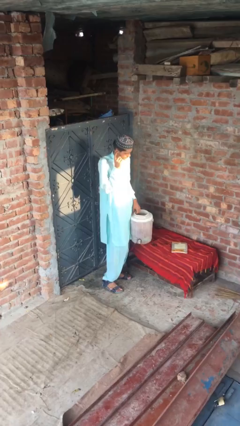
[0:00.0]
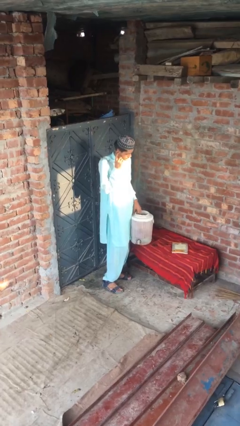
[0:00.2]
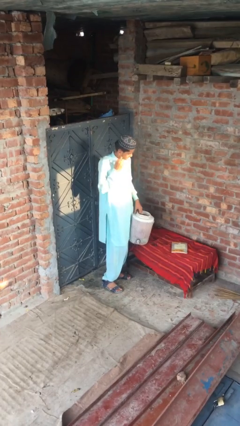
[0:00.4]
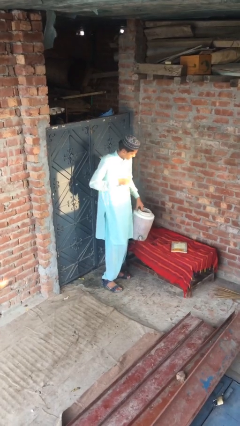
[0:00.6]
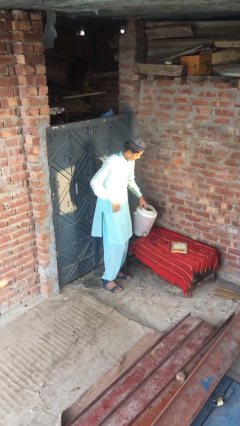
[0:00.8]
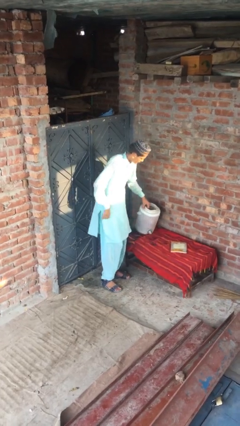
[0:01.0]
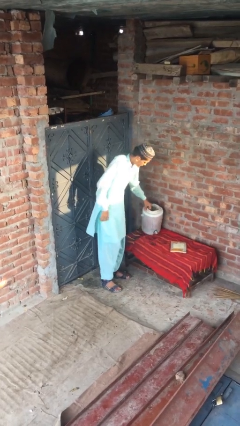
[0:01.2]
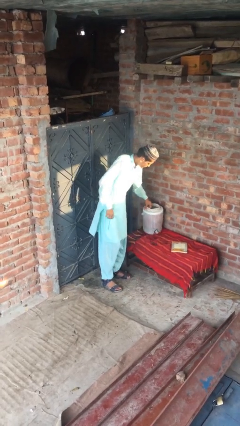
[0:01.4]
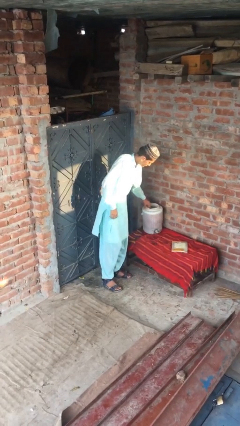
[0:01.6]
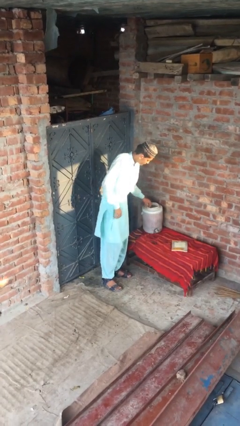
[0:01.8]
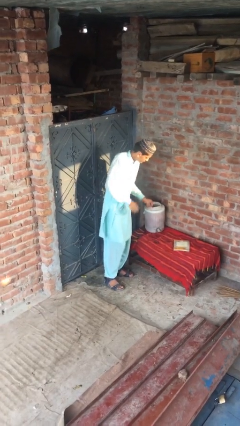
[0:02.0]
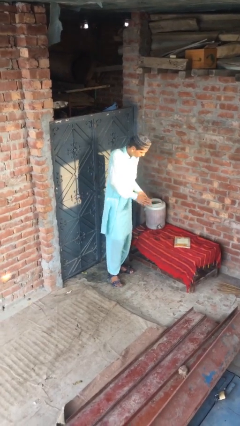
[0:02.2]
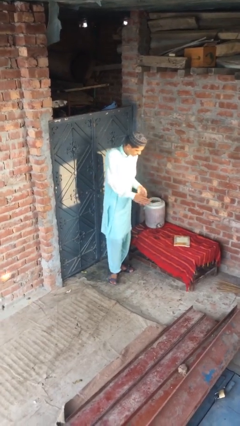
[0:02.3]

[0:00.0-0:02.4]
person puts down object on table

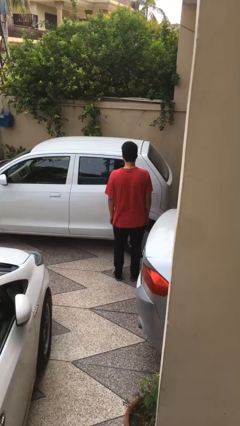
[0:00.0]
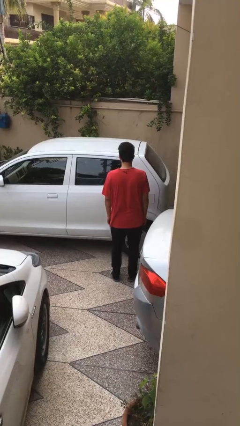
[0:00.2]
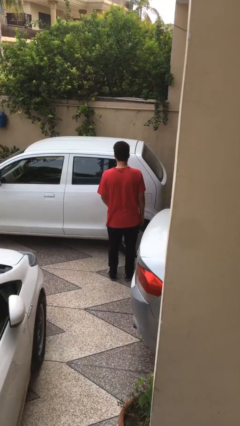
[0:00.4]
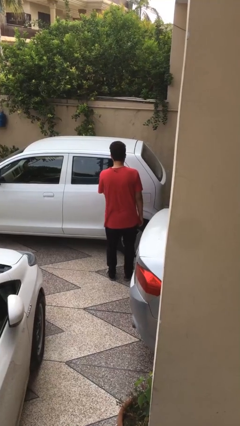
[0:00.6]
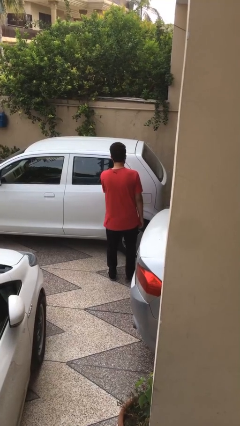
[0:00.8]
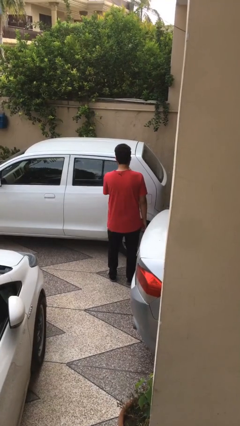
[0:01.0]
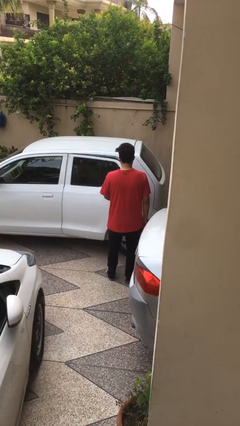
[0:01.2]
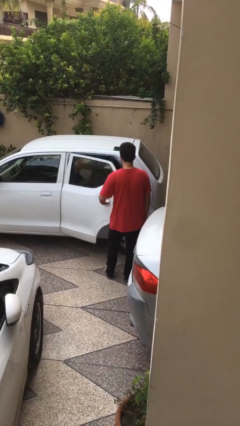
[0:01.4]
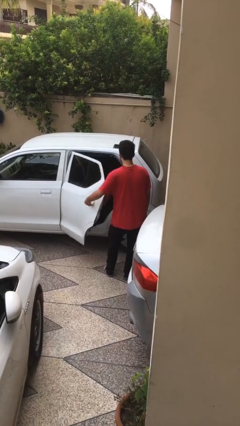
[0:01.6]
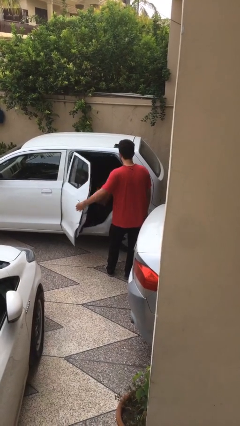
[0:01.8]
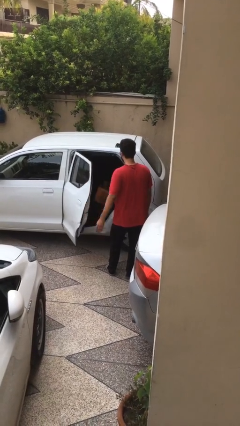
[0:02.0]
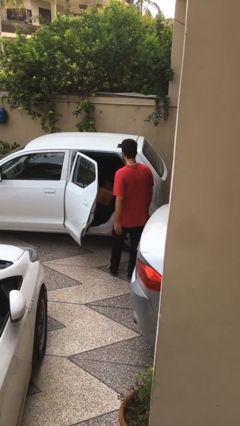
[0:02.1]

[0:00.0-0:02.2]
person opens car door

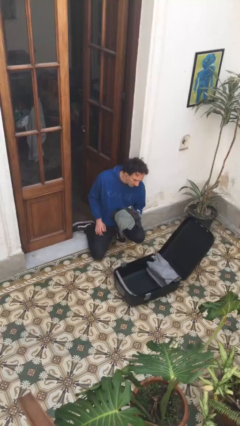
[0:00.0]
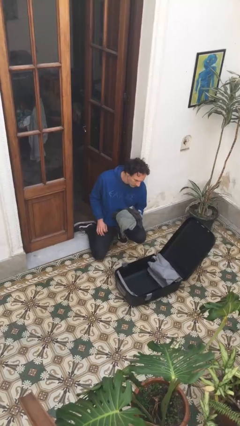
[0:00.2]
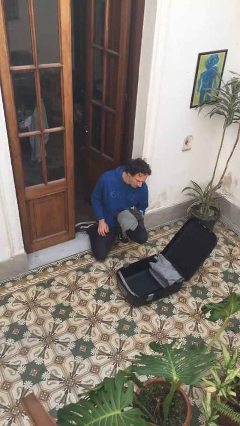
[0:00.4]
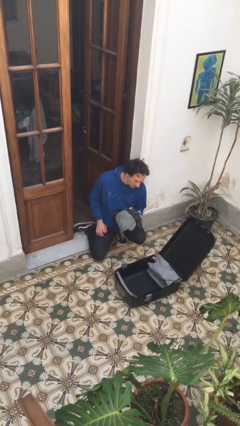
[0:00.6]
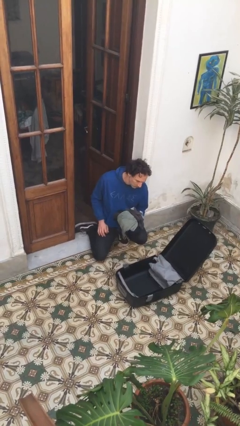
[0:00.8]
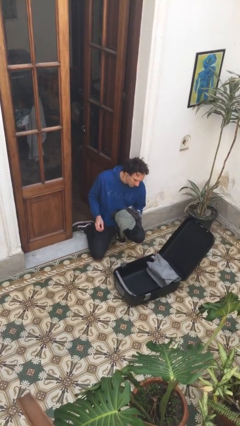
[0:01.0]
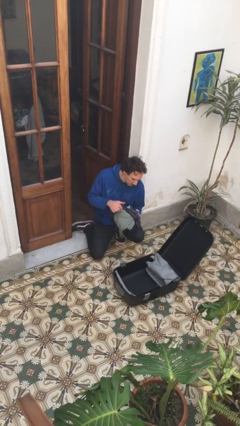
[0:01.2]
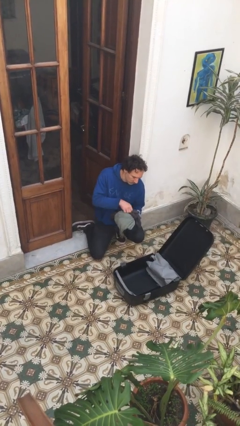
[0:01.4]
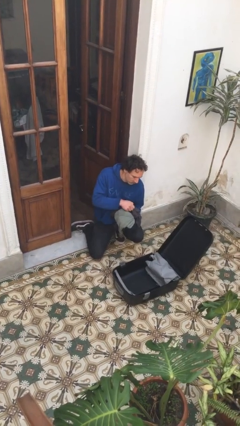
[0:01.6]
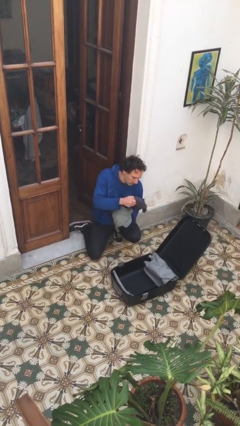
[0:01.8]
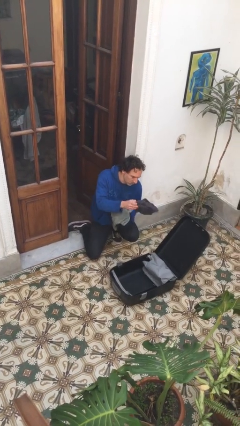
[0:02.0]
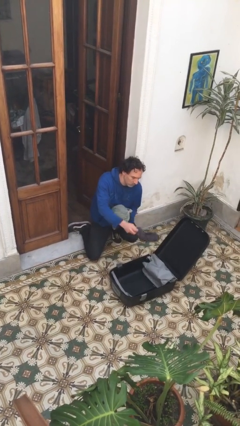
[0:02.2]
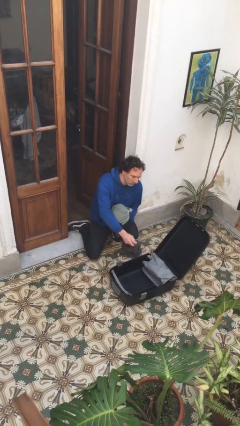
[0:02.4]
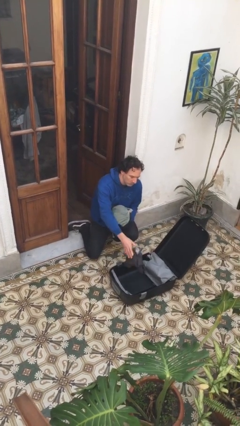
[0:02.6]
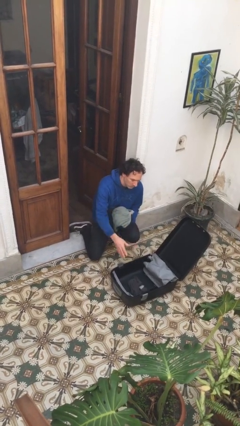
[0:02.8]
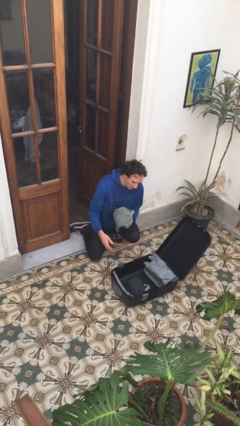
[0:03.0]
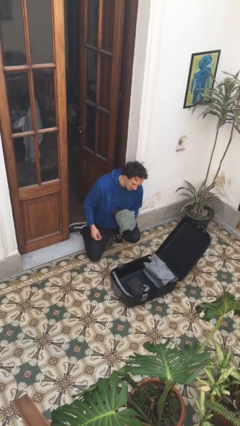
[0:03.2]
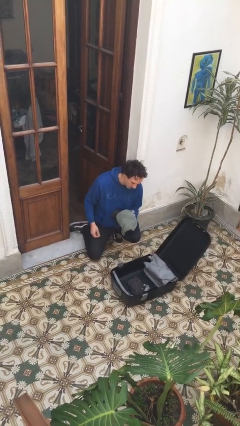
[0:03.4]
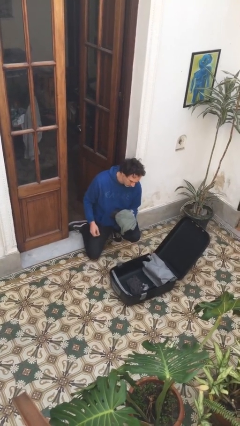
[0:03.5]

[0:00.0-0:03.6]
person loads clothes into suitcase

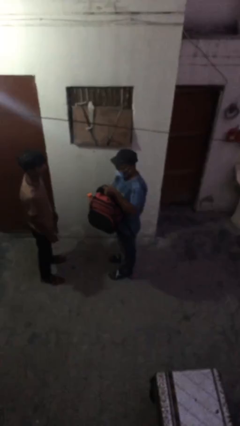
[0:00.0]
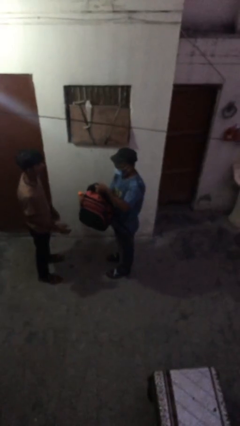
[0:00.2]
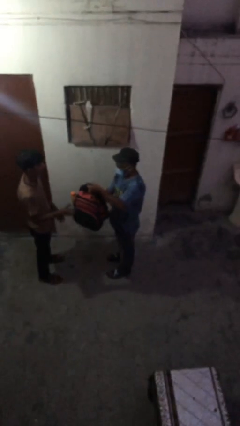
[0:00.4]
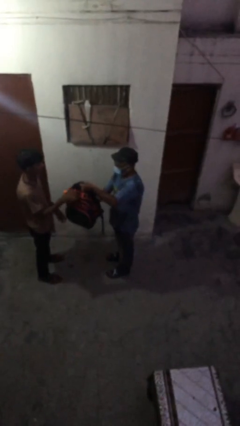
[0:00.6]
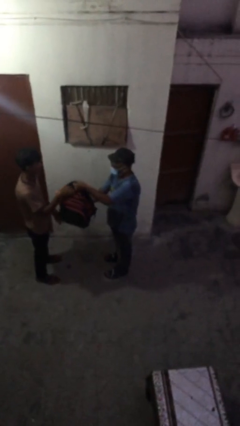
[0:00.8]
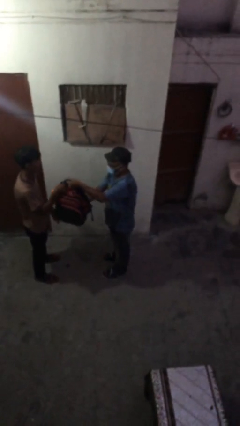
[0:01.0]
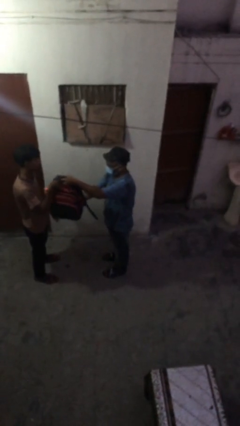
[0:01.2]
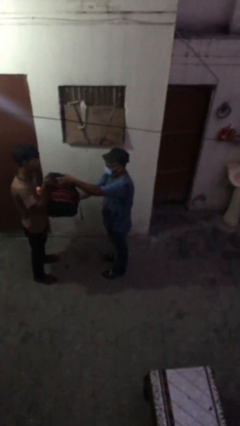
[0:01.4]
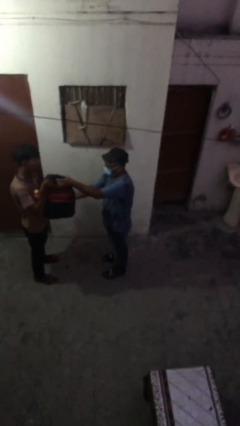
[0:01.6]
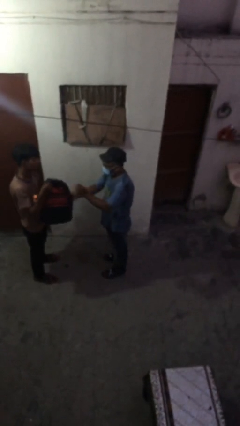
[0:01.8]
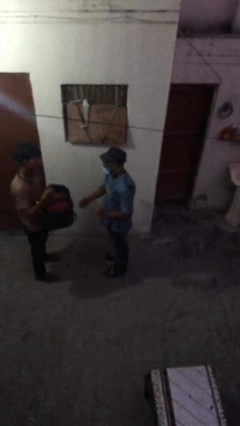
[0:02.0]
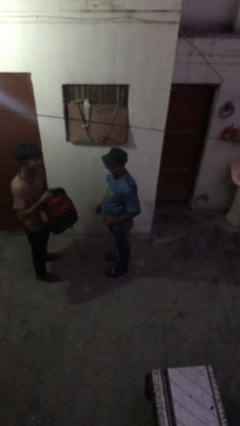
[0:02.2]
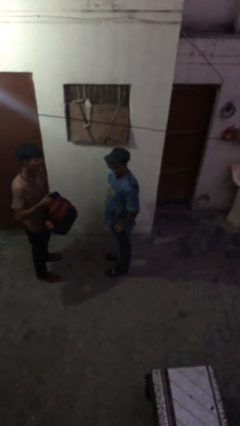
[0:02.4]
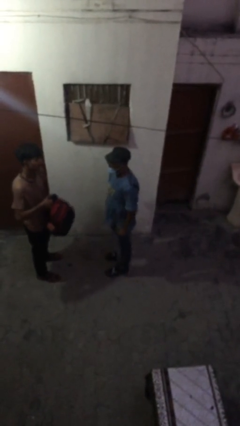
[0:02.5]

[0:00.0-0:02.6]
person transfers object to person

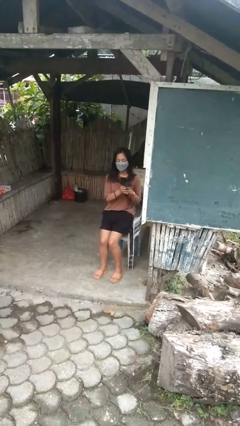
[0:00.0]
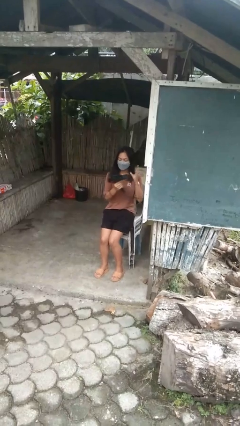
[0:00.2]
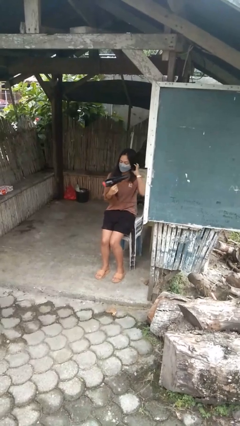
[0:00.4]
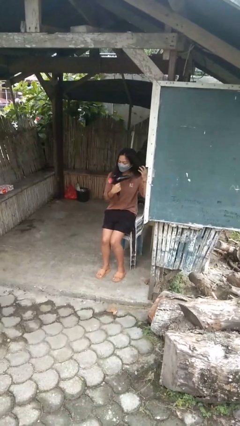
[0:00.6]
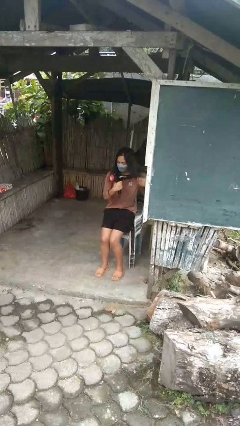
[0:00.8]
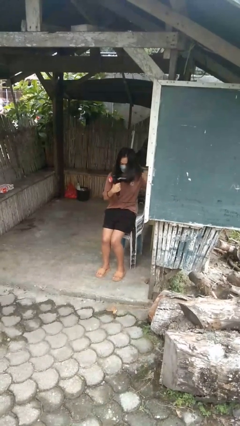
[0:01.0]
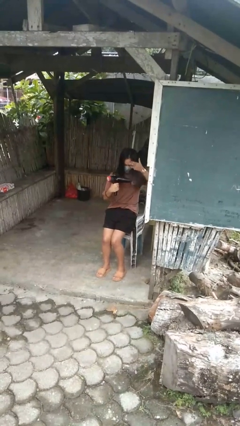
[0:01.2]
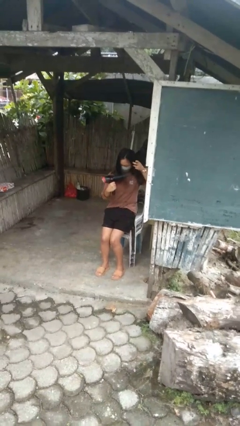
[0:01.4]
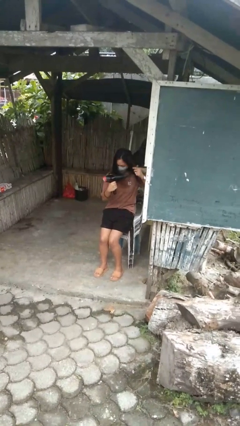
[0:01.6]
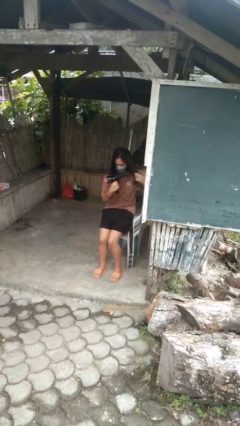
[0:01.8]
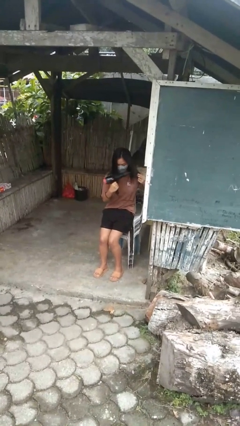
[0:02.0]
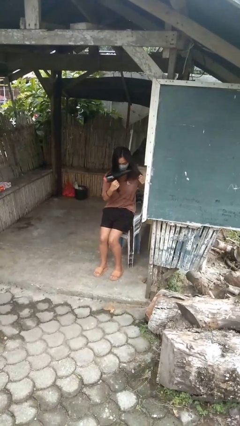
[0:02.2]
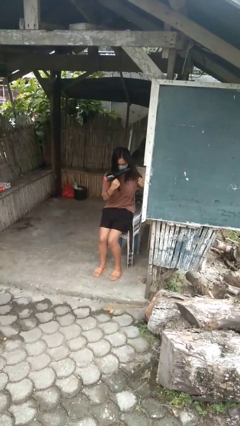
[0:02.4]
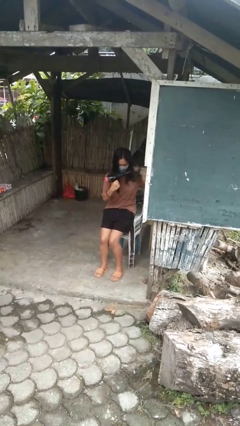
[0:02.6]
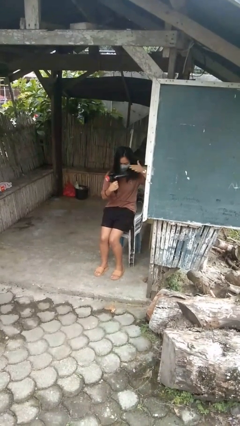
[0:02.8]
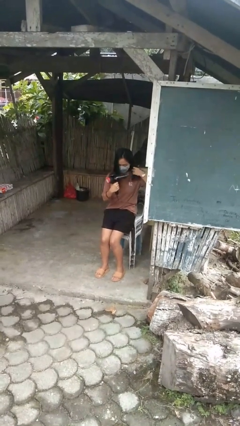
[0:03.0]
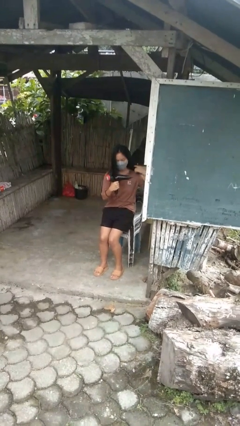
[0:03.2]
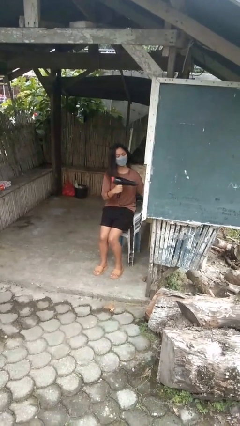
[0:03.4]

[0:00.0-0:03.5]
person dries hair with hairdryer

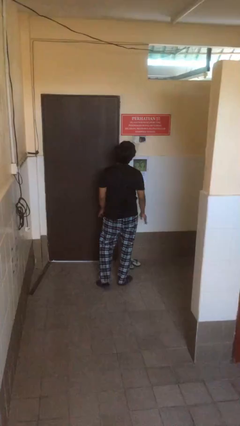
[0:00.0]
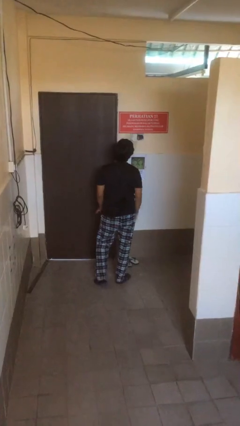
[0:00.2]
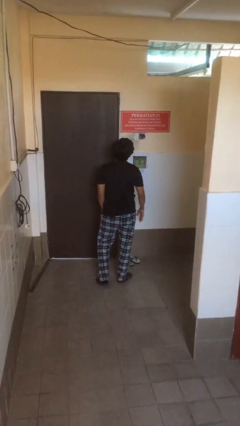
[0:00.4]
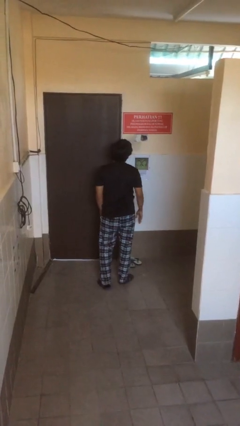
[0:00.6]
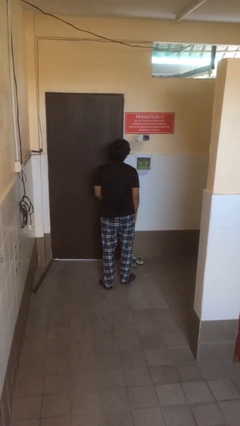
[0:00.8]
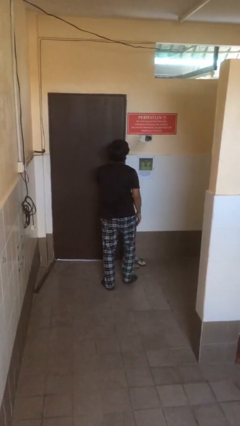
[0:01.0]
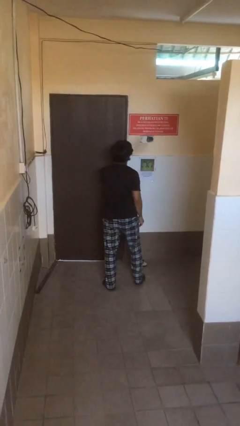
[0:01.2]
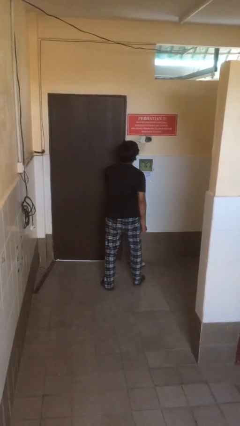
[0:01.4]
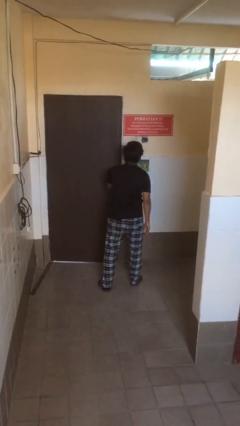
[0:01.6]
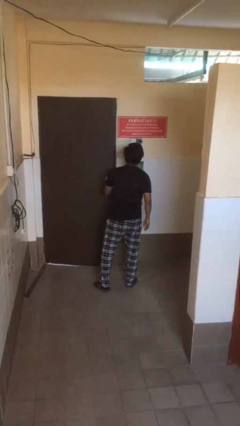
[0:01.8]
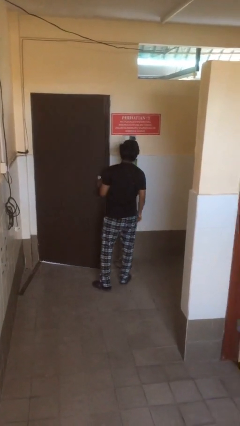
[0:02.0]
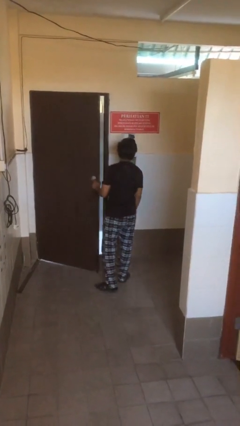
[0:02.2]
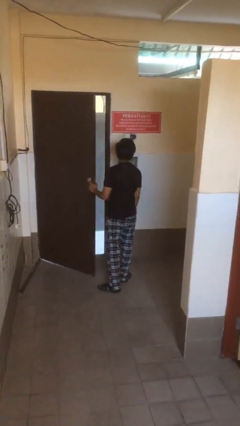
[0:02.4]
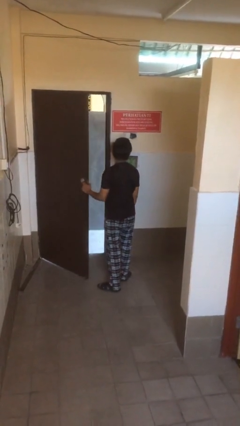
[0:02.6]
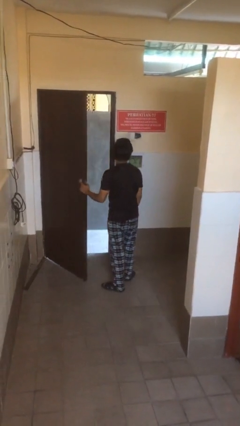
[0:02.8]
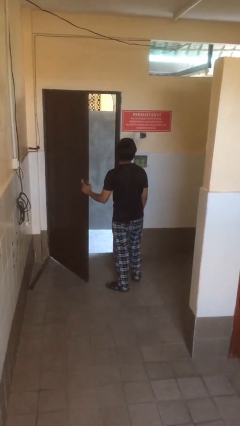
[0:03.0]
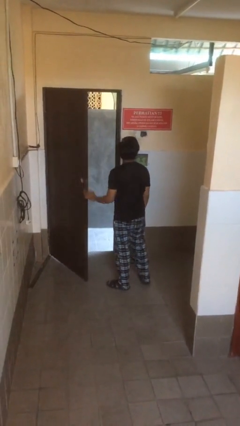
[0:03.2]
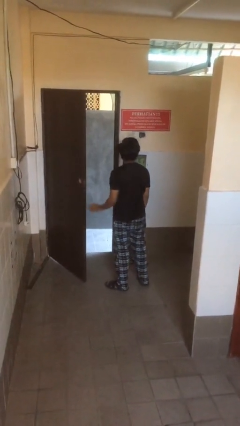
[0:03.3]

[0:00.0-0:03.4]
person opens facility door

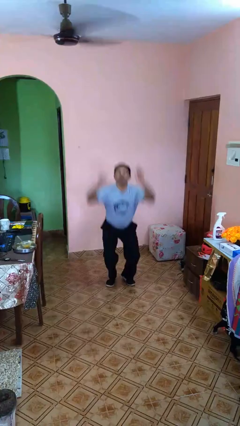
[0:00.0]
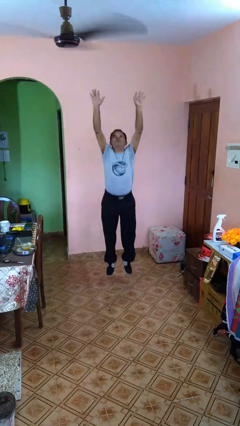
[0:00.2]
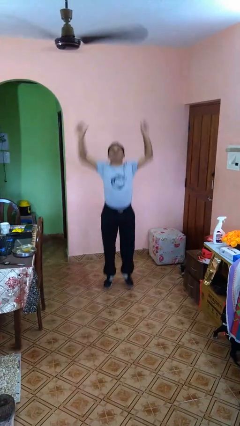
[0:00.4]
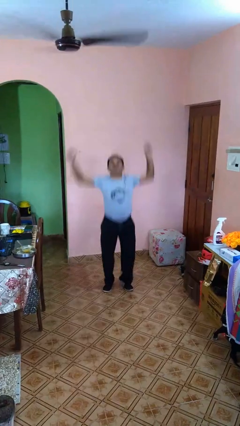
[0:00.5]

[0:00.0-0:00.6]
person jumps
